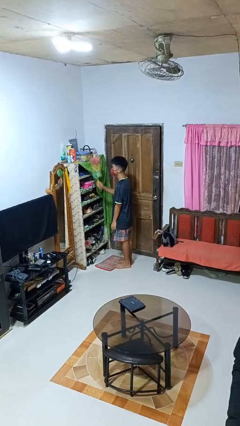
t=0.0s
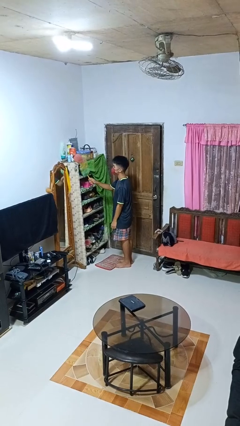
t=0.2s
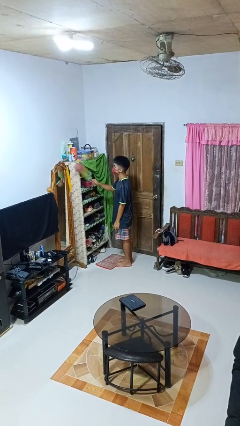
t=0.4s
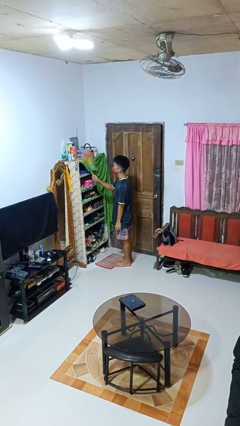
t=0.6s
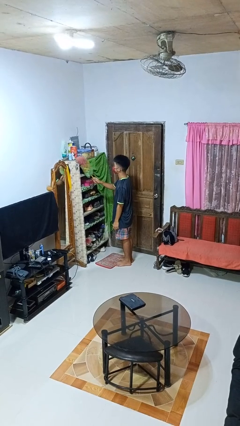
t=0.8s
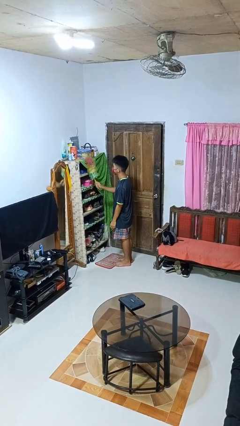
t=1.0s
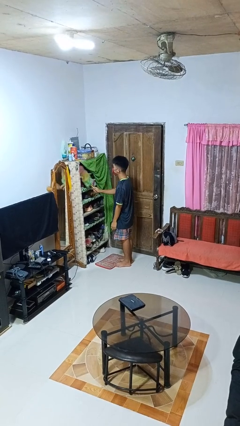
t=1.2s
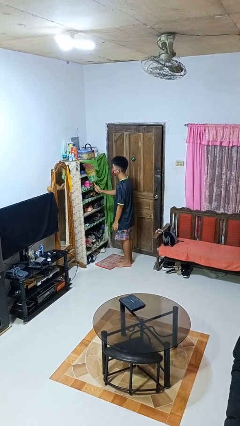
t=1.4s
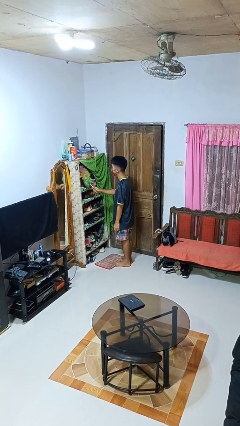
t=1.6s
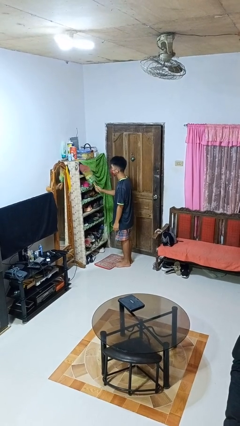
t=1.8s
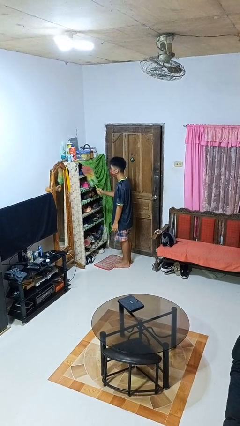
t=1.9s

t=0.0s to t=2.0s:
person dusts furniture

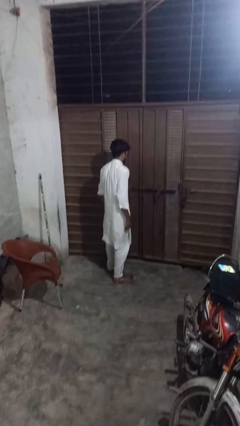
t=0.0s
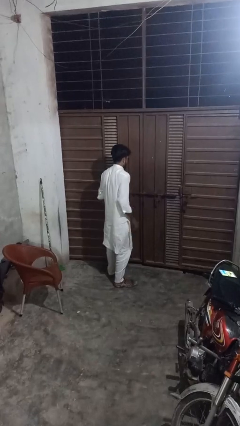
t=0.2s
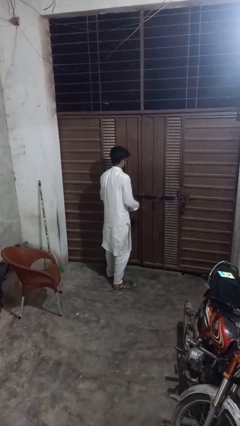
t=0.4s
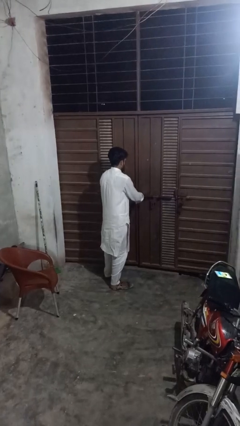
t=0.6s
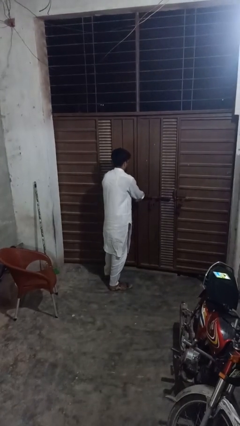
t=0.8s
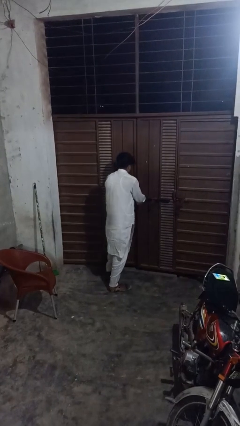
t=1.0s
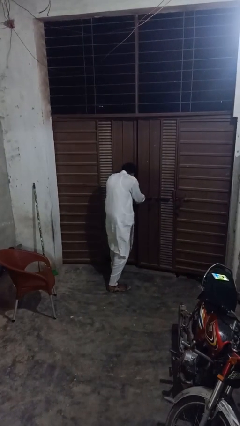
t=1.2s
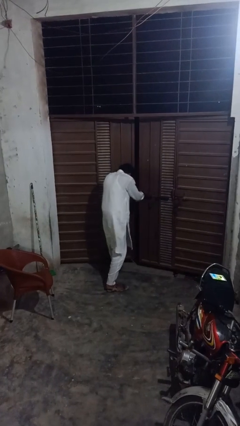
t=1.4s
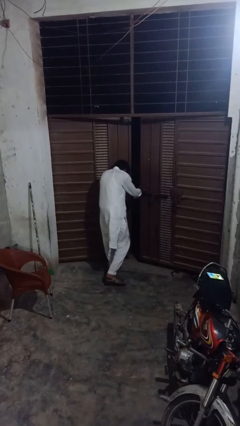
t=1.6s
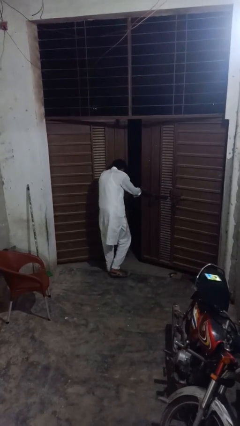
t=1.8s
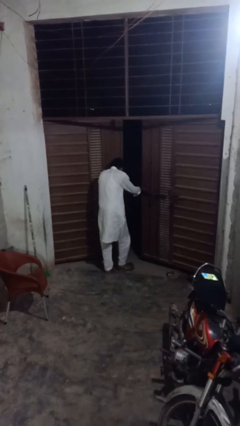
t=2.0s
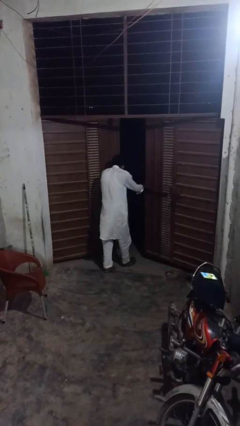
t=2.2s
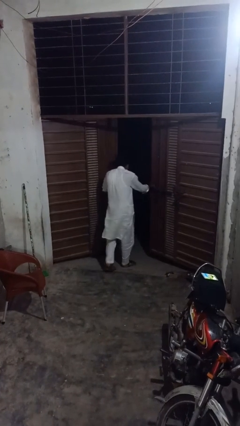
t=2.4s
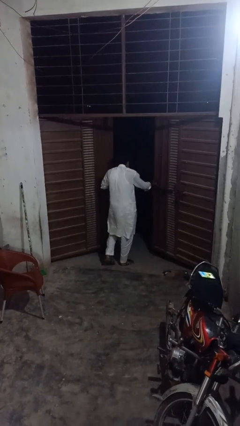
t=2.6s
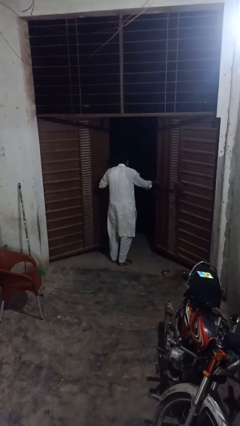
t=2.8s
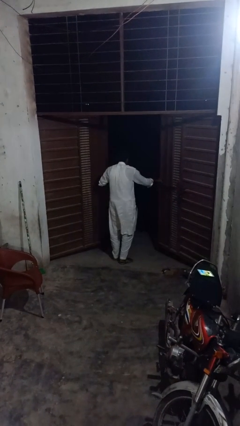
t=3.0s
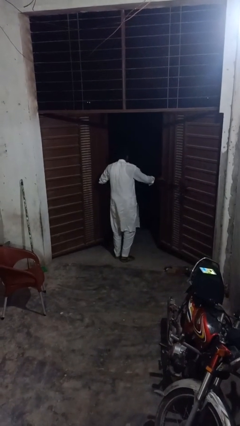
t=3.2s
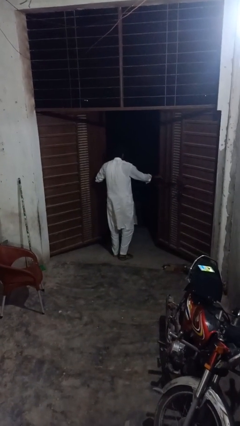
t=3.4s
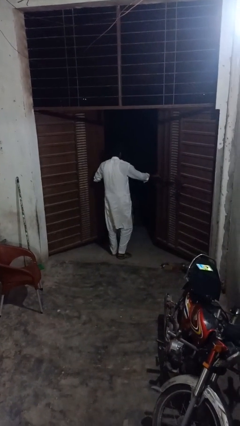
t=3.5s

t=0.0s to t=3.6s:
person opens gate

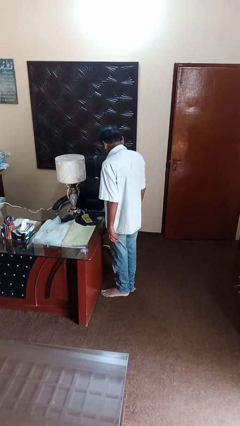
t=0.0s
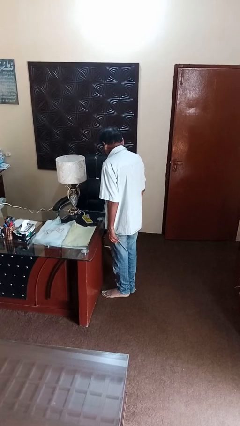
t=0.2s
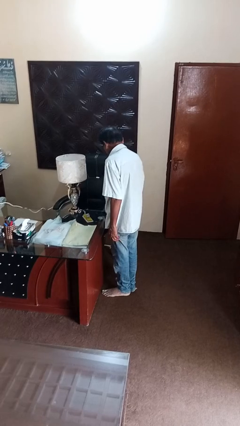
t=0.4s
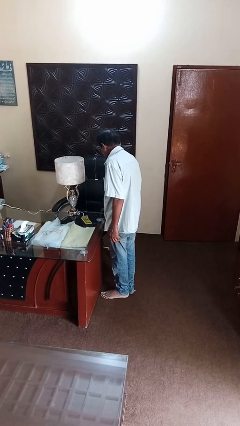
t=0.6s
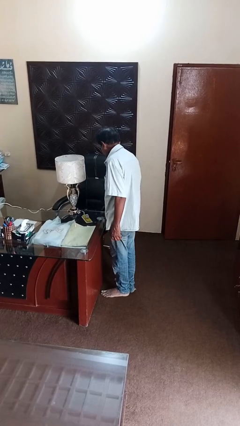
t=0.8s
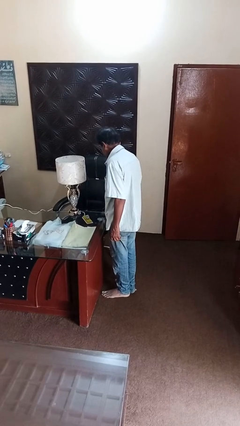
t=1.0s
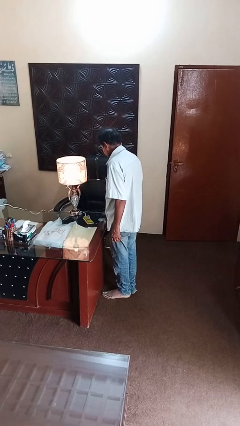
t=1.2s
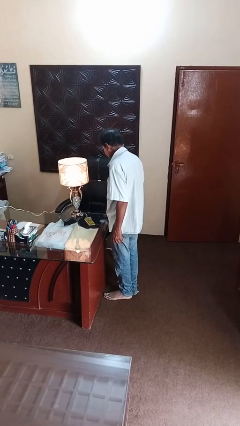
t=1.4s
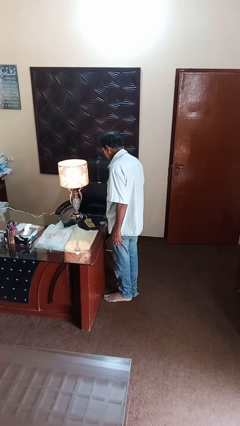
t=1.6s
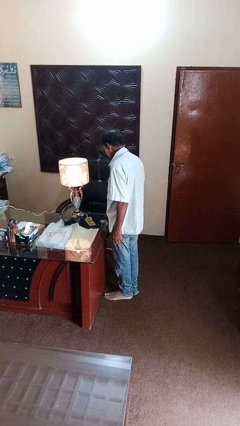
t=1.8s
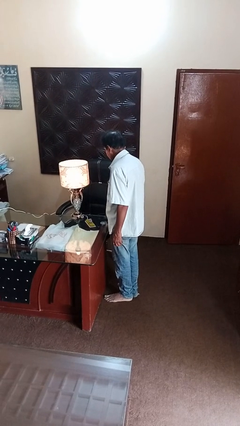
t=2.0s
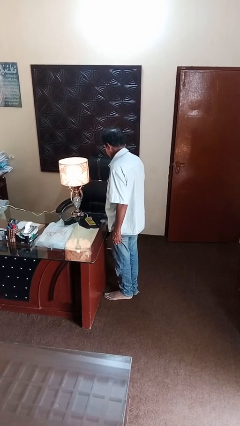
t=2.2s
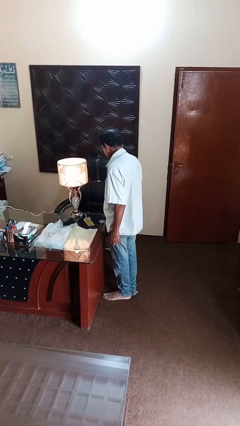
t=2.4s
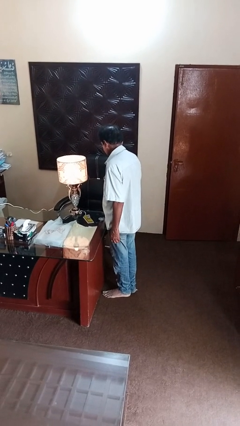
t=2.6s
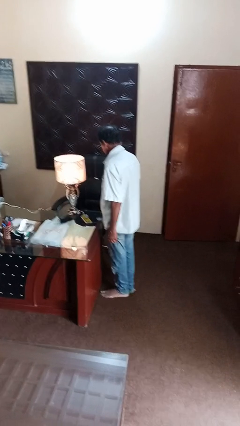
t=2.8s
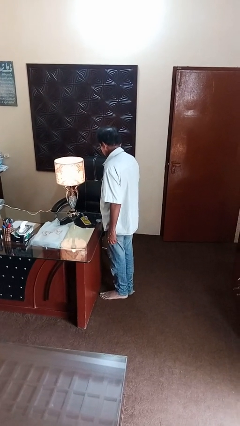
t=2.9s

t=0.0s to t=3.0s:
person turns on lamp

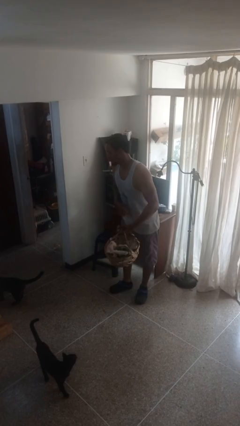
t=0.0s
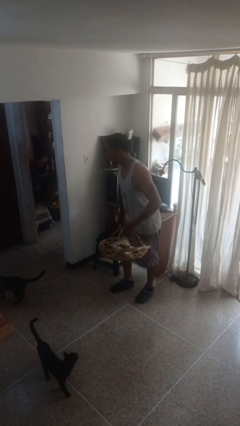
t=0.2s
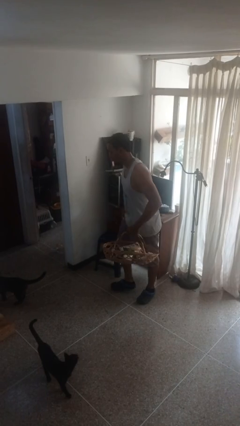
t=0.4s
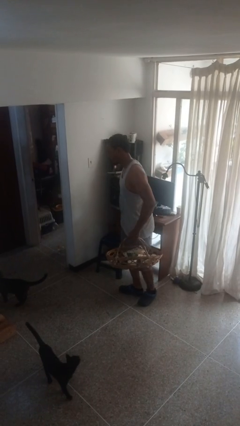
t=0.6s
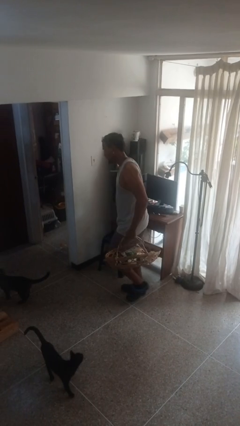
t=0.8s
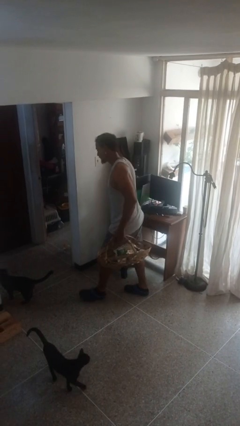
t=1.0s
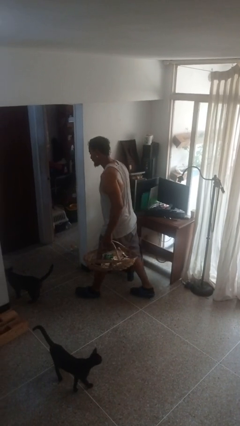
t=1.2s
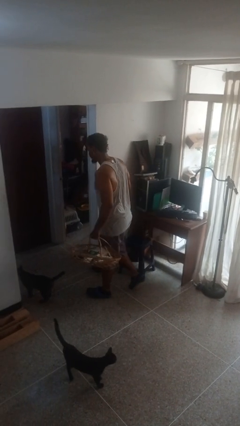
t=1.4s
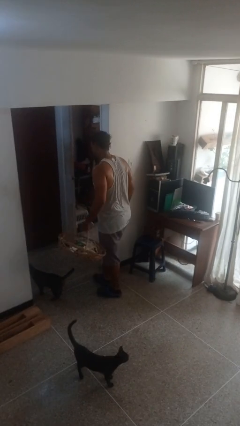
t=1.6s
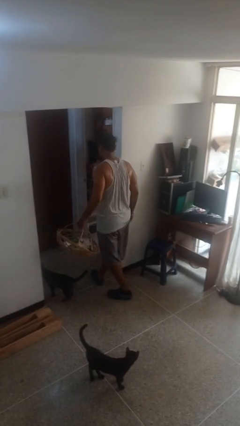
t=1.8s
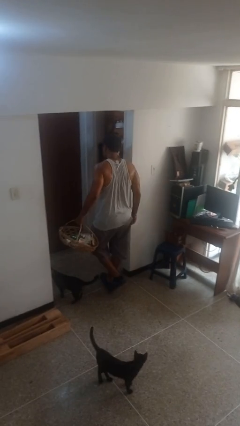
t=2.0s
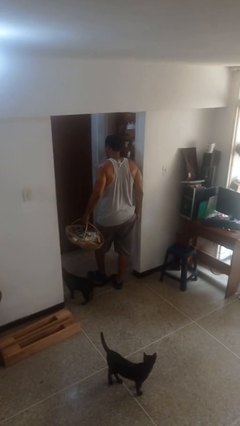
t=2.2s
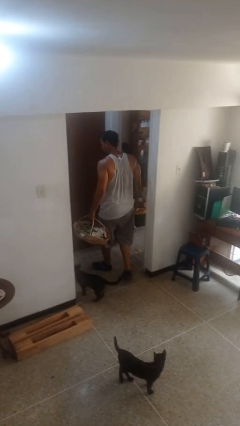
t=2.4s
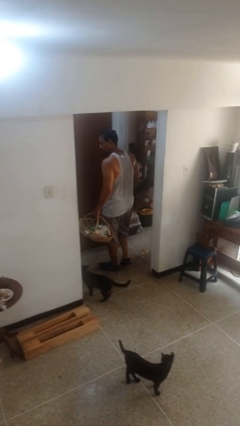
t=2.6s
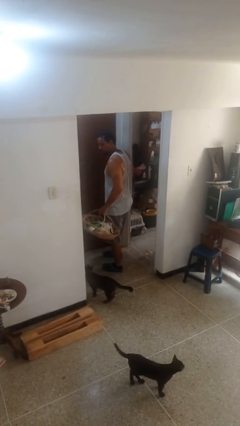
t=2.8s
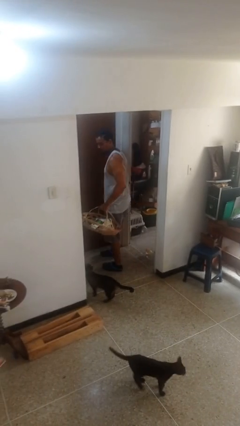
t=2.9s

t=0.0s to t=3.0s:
person carries groceries

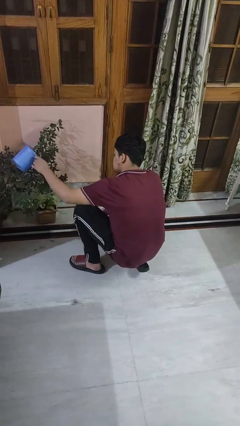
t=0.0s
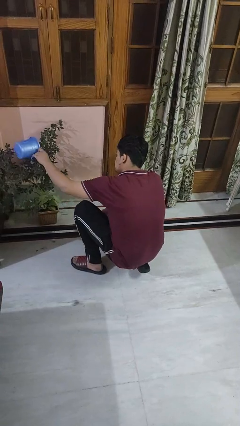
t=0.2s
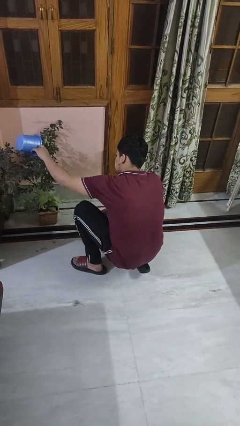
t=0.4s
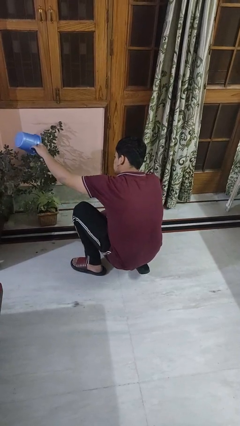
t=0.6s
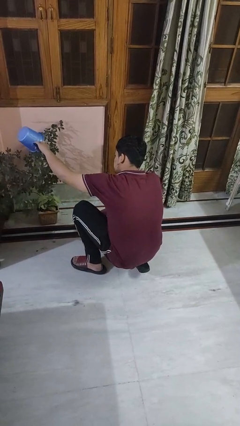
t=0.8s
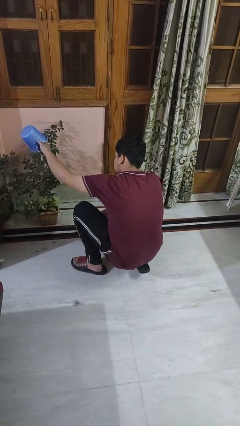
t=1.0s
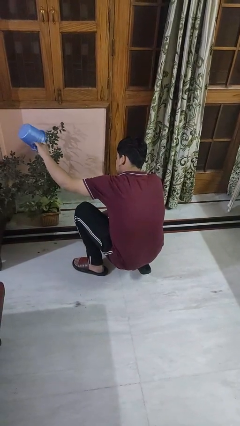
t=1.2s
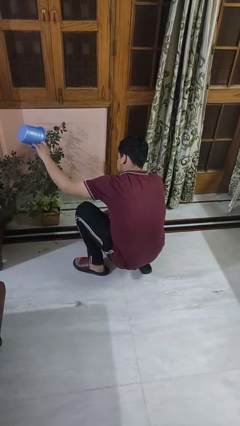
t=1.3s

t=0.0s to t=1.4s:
person waters houseplant

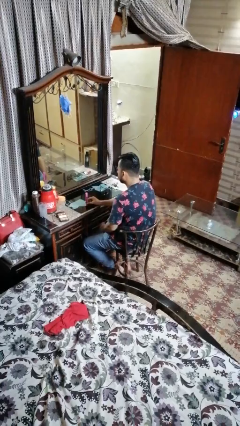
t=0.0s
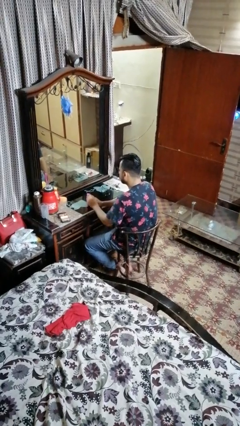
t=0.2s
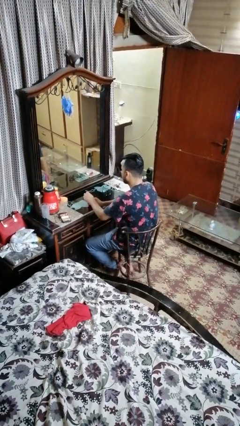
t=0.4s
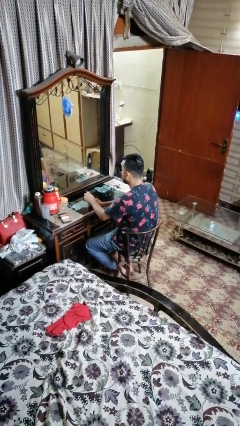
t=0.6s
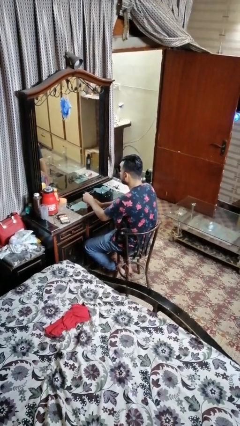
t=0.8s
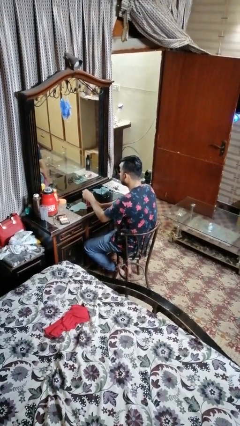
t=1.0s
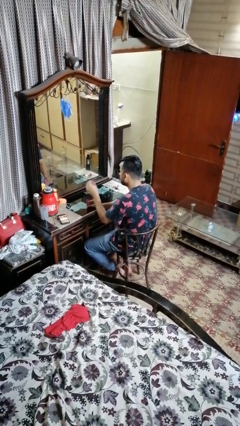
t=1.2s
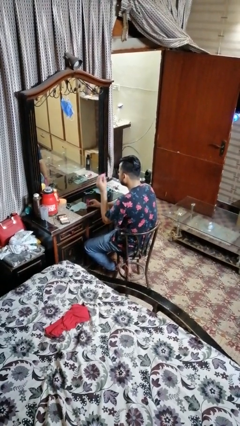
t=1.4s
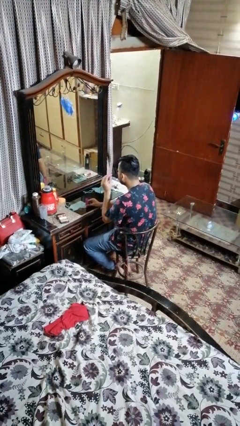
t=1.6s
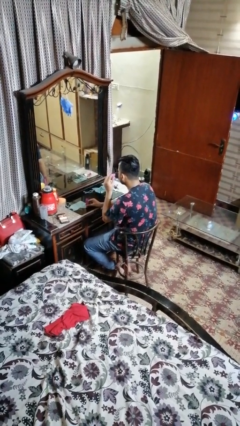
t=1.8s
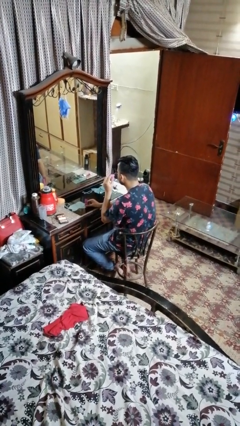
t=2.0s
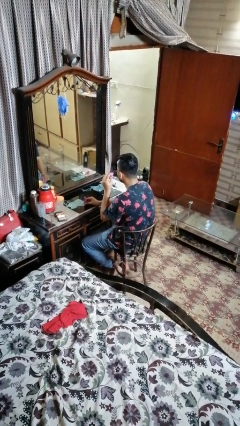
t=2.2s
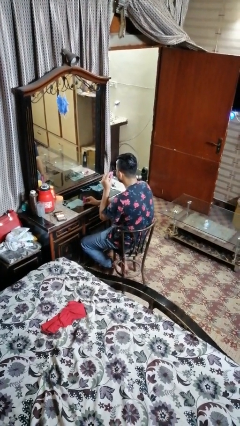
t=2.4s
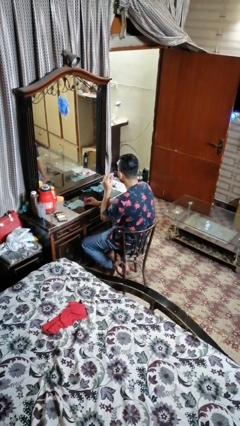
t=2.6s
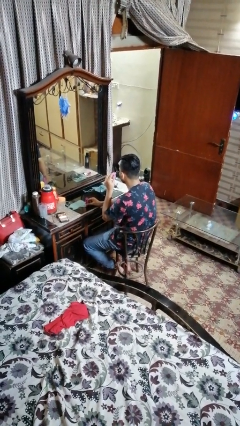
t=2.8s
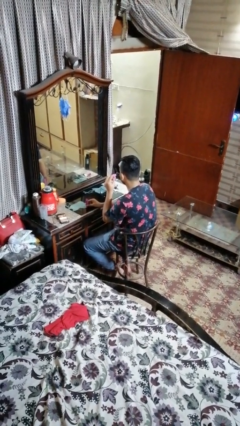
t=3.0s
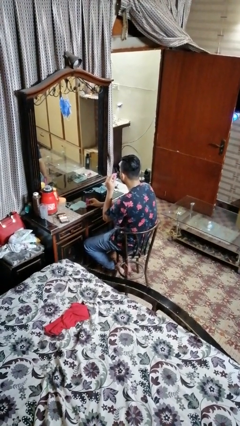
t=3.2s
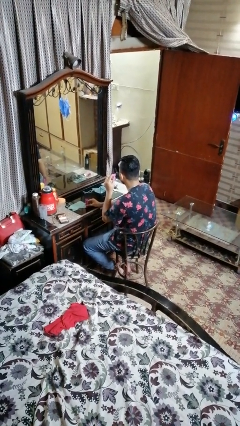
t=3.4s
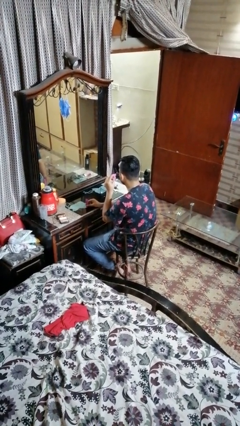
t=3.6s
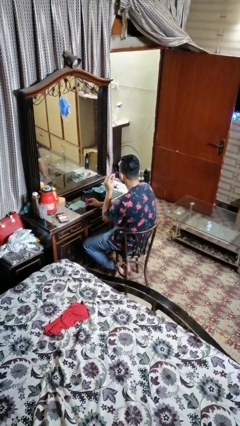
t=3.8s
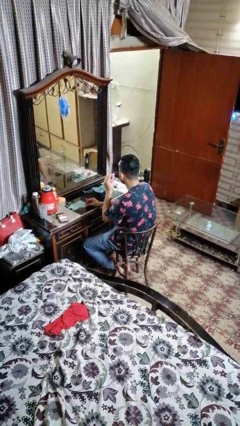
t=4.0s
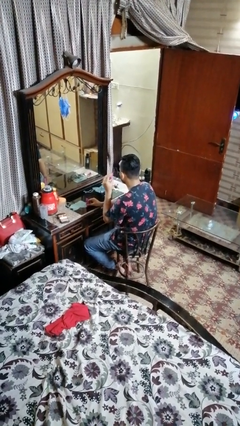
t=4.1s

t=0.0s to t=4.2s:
person applies eye makeup
